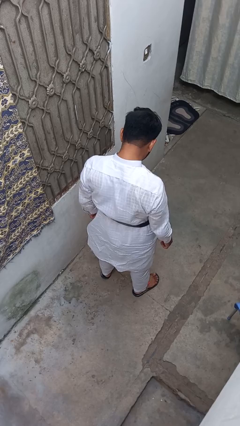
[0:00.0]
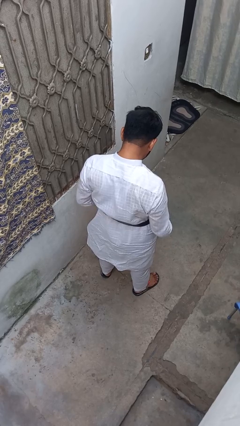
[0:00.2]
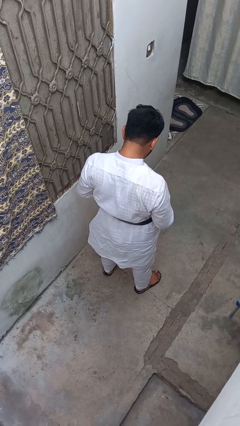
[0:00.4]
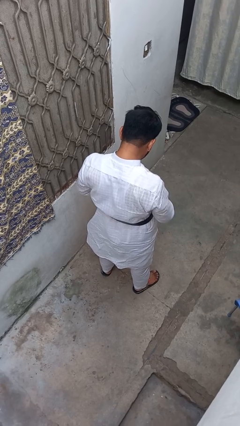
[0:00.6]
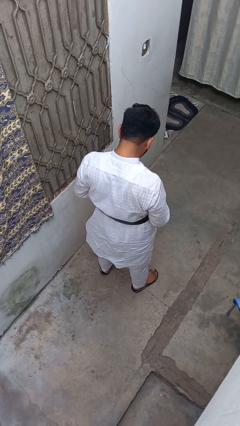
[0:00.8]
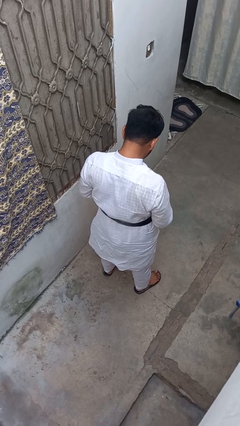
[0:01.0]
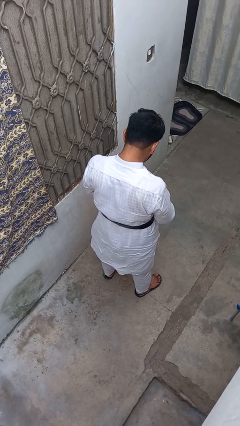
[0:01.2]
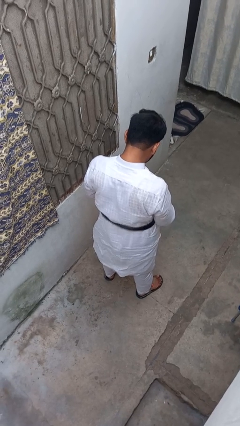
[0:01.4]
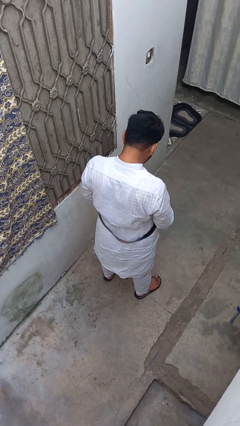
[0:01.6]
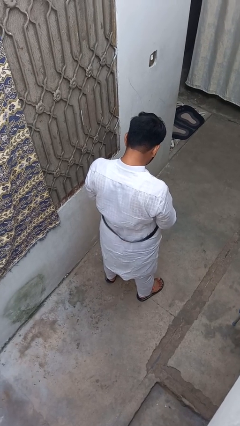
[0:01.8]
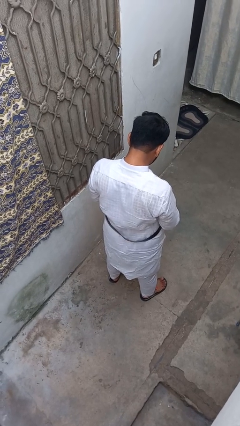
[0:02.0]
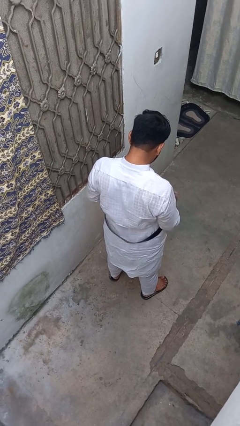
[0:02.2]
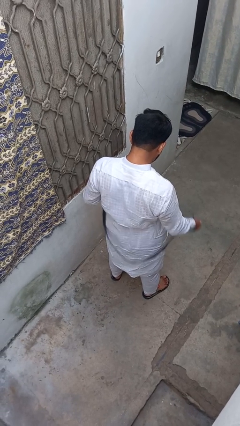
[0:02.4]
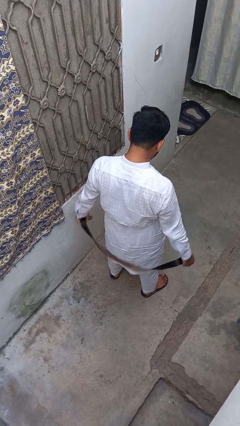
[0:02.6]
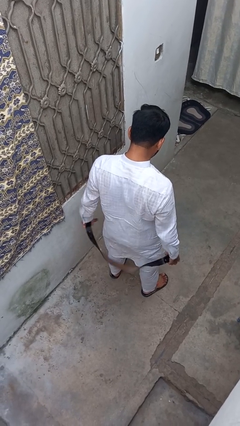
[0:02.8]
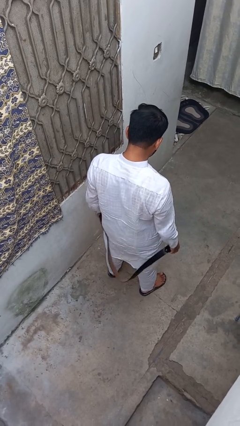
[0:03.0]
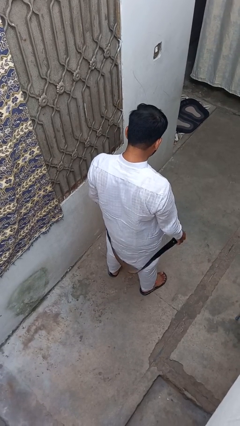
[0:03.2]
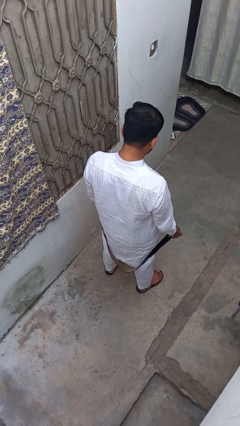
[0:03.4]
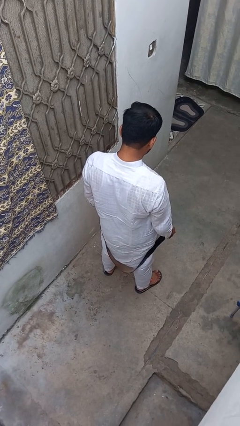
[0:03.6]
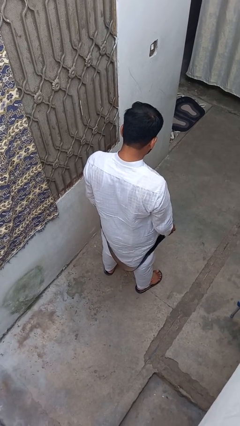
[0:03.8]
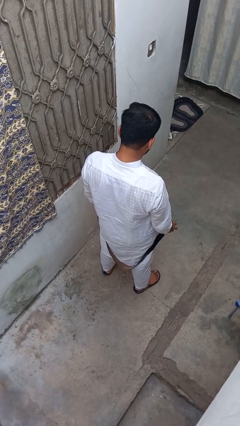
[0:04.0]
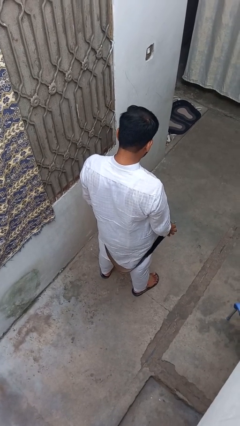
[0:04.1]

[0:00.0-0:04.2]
person takes off belt

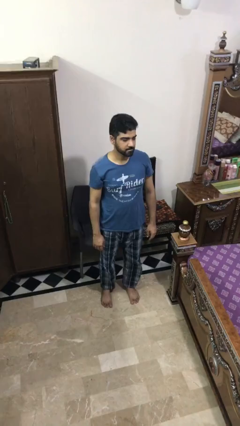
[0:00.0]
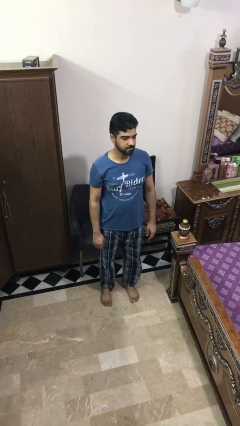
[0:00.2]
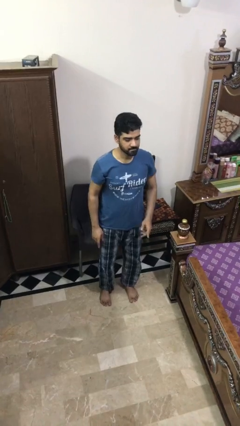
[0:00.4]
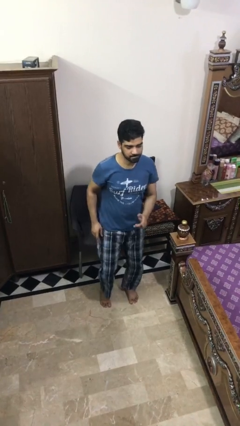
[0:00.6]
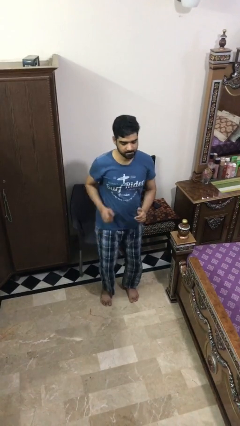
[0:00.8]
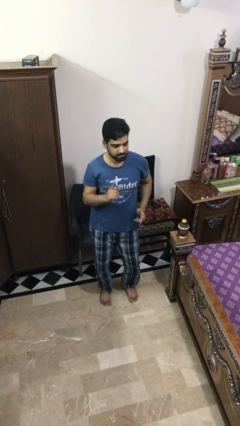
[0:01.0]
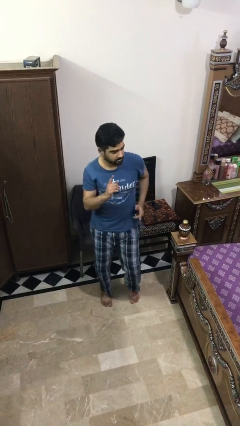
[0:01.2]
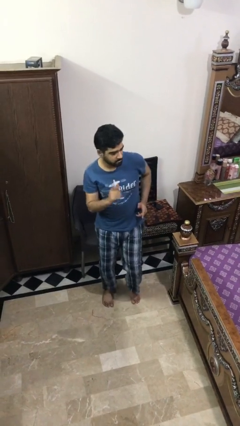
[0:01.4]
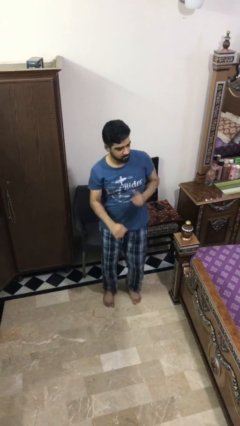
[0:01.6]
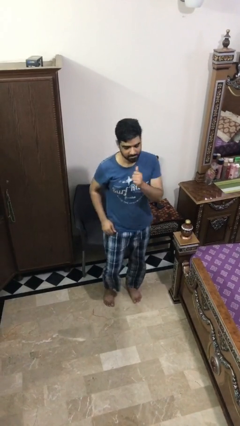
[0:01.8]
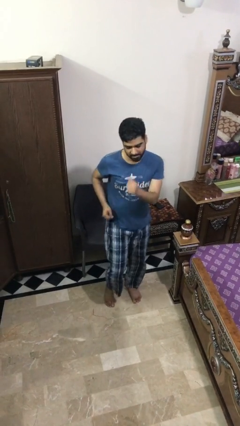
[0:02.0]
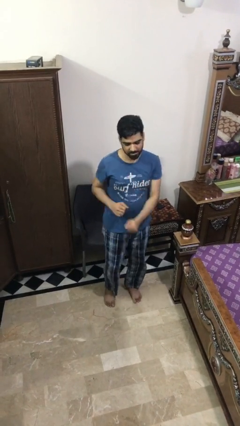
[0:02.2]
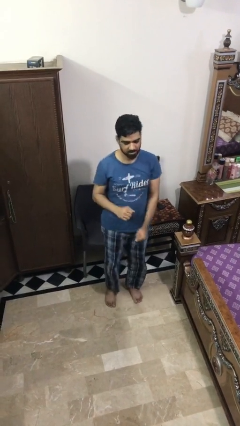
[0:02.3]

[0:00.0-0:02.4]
person dances in place

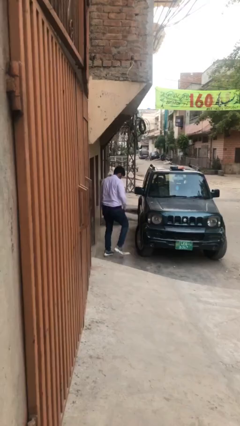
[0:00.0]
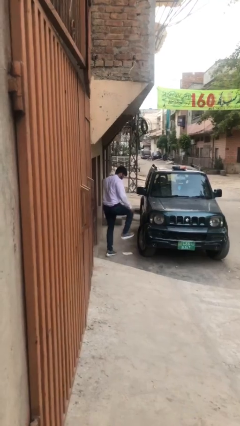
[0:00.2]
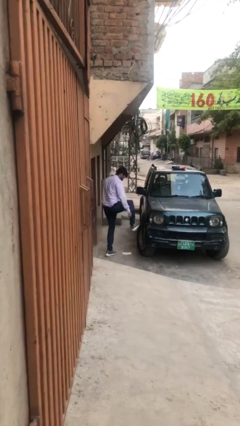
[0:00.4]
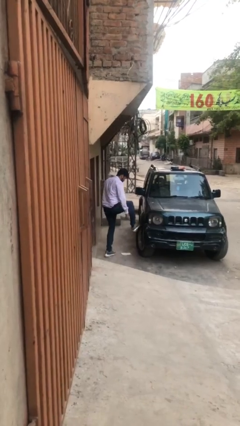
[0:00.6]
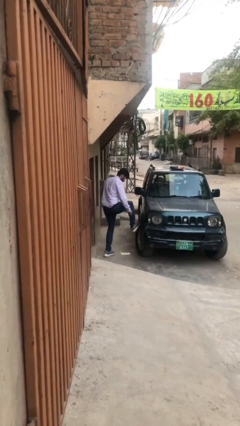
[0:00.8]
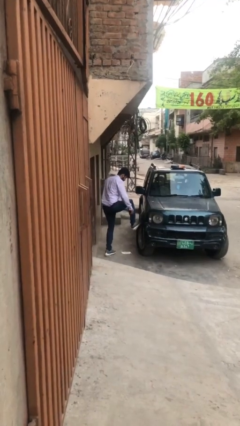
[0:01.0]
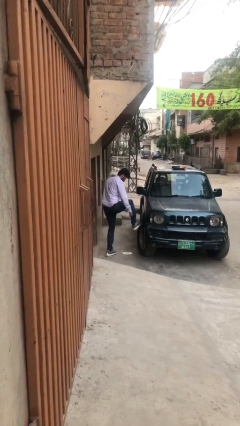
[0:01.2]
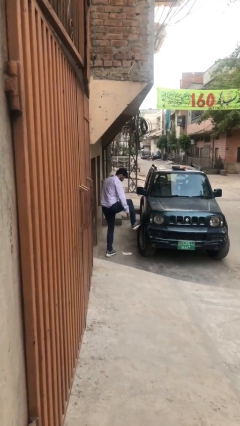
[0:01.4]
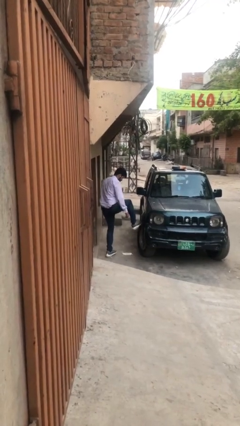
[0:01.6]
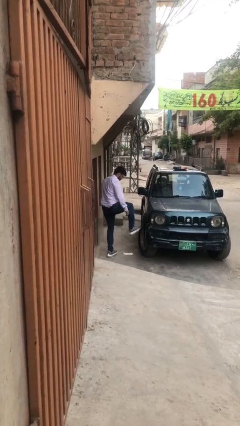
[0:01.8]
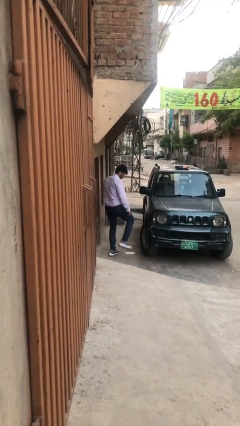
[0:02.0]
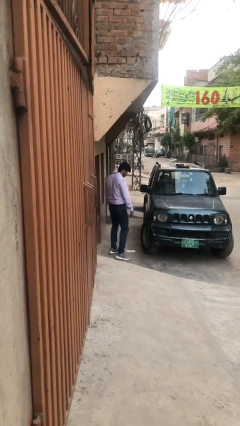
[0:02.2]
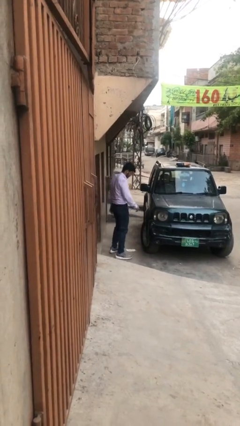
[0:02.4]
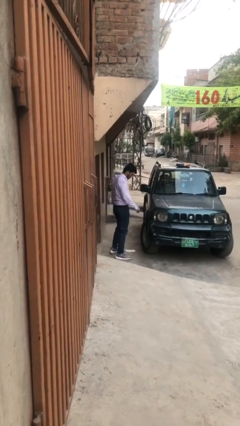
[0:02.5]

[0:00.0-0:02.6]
person kicks car tires

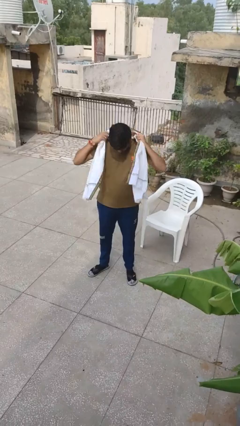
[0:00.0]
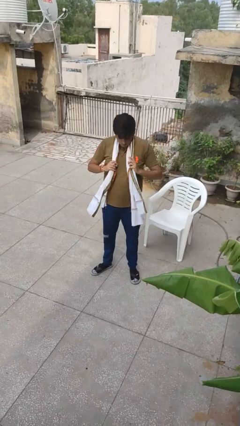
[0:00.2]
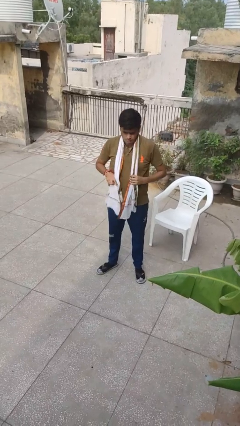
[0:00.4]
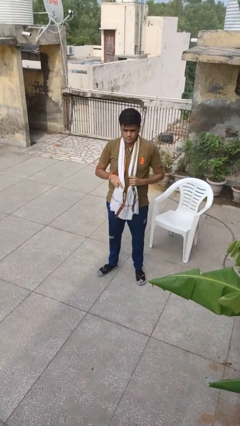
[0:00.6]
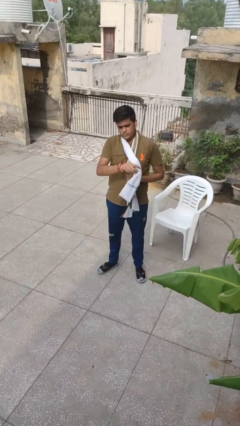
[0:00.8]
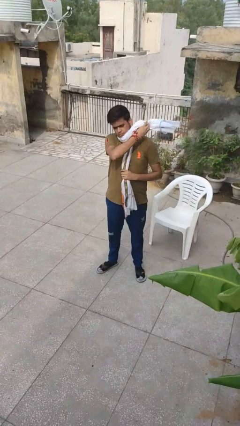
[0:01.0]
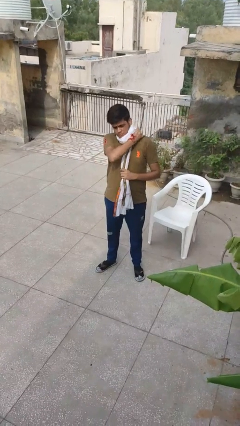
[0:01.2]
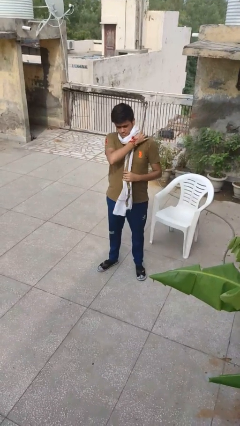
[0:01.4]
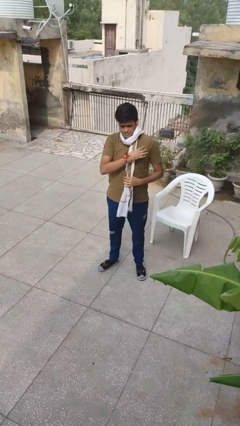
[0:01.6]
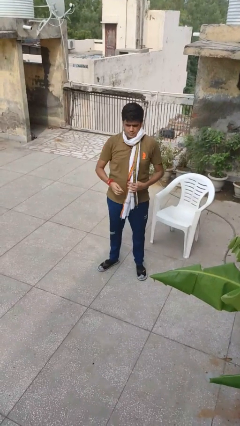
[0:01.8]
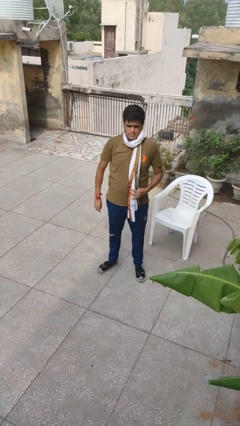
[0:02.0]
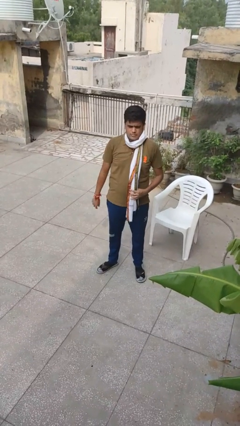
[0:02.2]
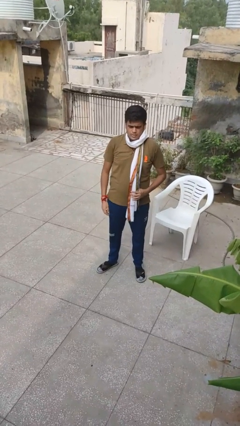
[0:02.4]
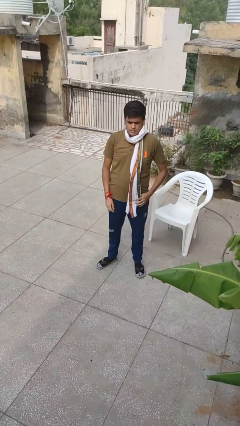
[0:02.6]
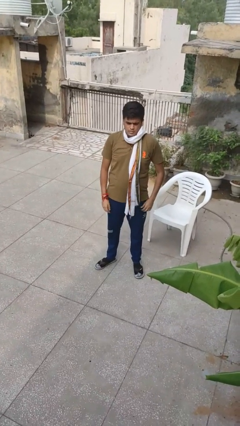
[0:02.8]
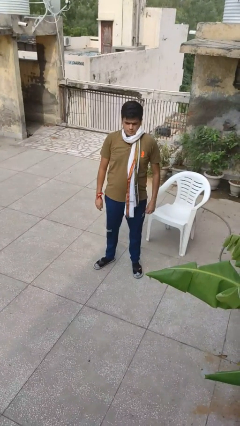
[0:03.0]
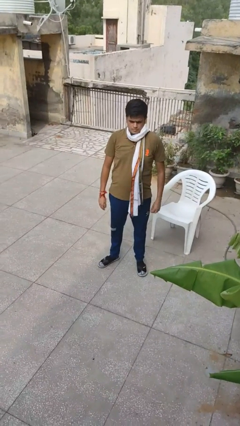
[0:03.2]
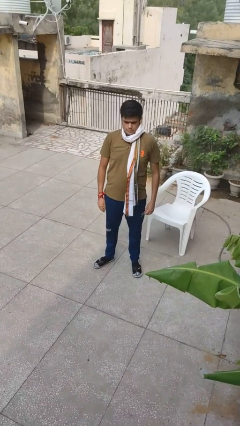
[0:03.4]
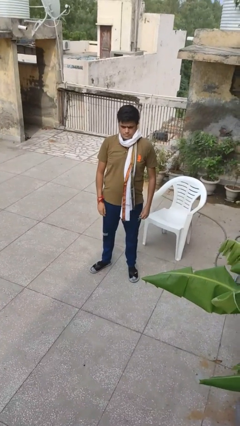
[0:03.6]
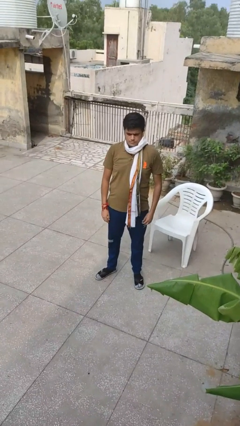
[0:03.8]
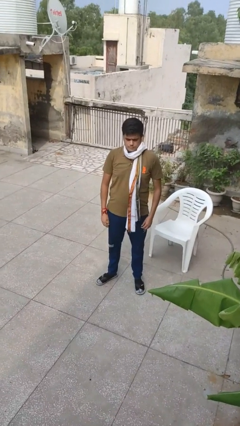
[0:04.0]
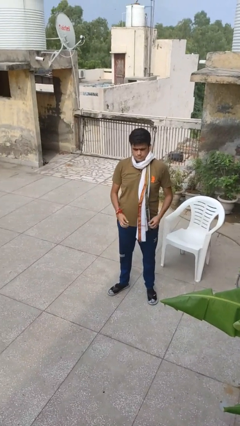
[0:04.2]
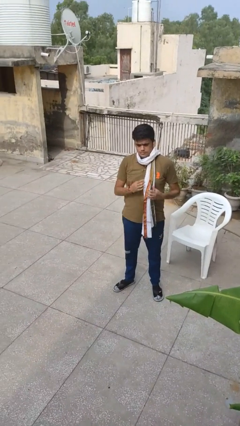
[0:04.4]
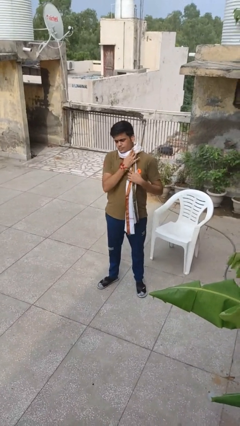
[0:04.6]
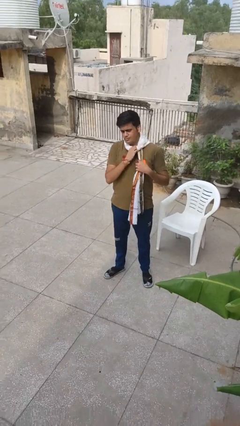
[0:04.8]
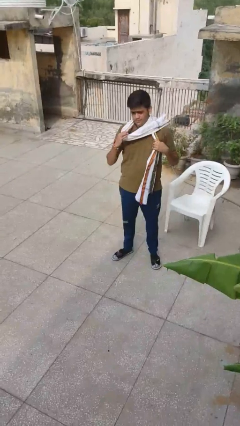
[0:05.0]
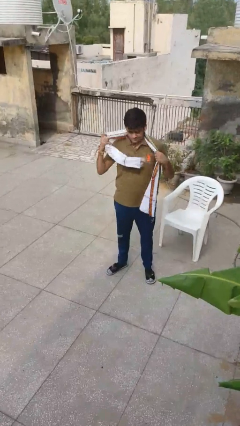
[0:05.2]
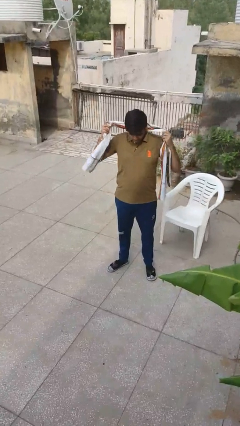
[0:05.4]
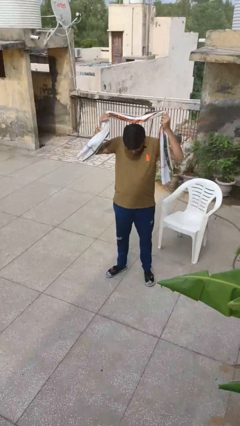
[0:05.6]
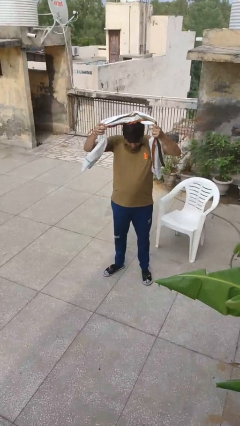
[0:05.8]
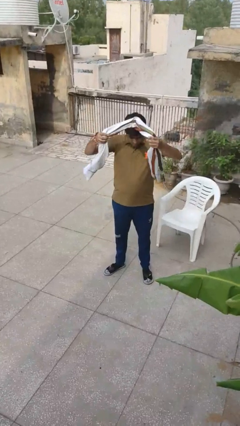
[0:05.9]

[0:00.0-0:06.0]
person puts on scarf

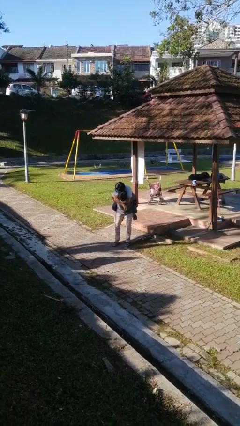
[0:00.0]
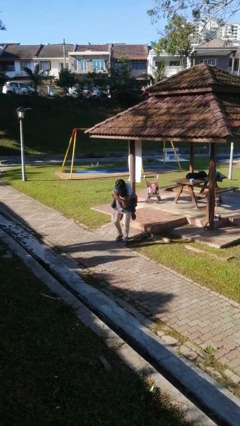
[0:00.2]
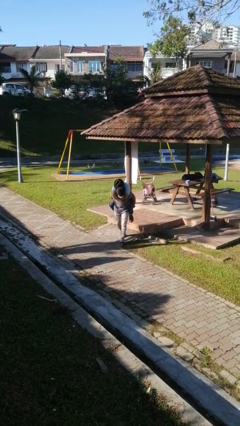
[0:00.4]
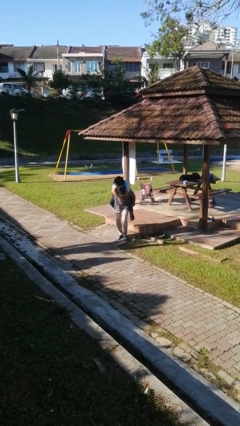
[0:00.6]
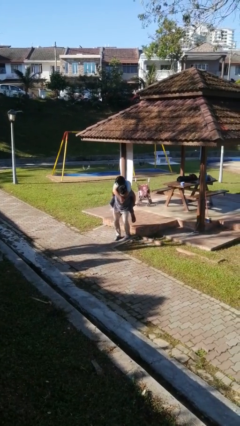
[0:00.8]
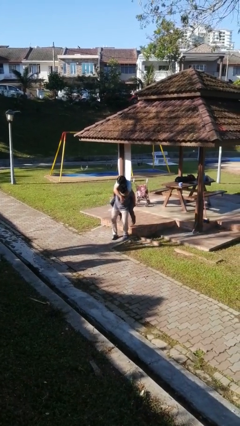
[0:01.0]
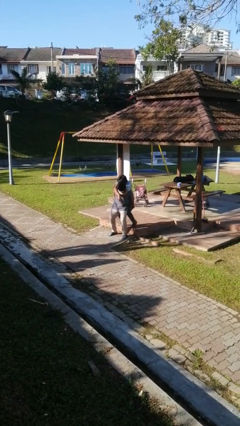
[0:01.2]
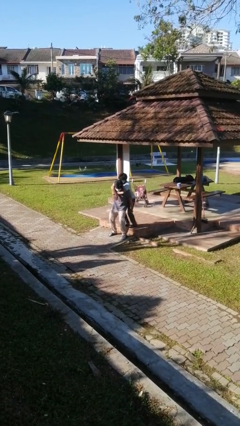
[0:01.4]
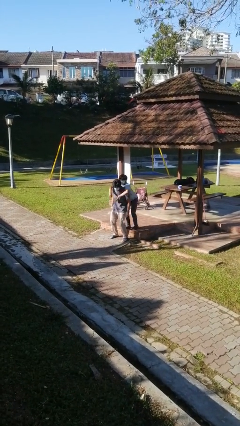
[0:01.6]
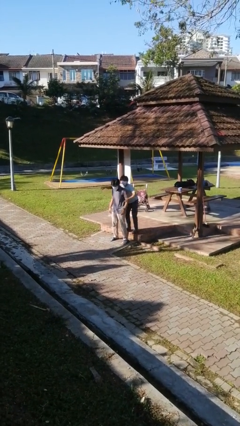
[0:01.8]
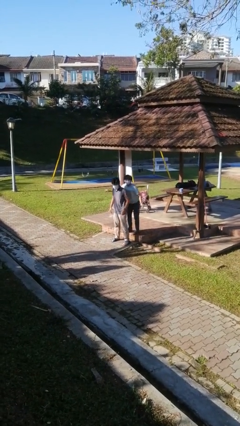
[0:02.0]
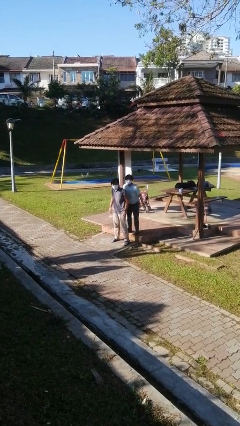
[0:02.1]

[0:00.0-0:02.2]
person puts down person
